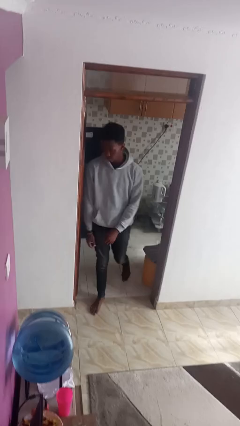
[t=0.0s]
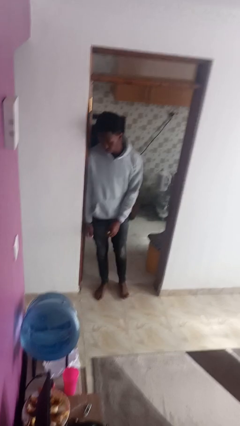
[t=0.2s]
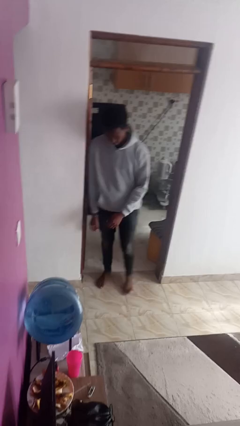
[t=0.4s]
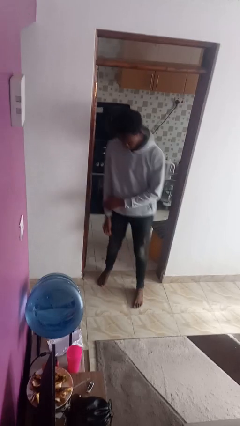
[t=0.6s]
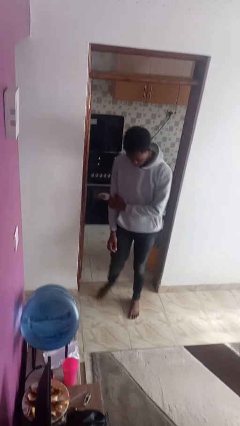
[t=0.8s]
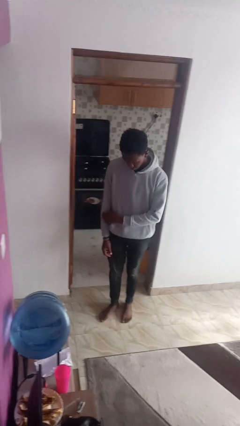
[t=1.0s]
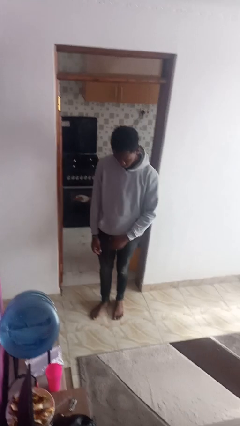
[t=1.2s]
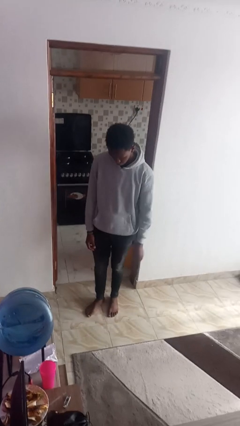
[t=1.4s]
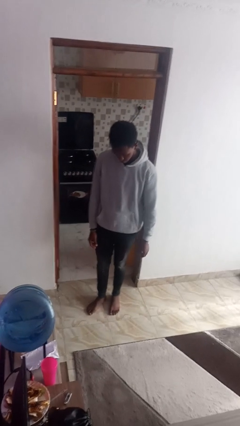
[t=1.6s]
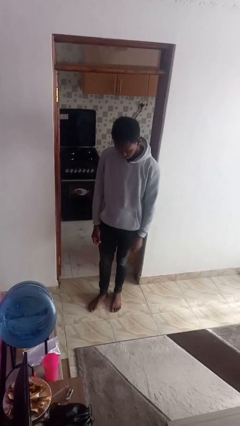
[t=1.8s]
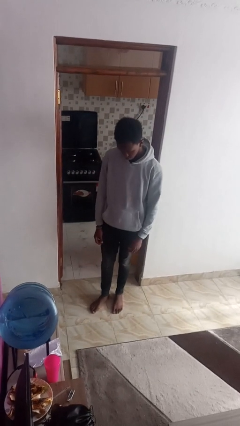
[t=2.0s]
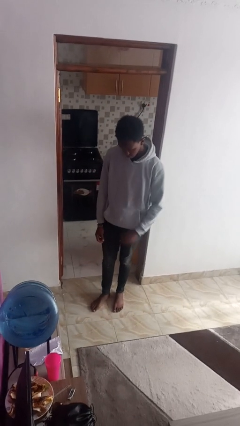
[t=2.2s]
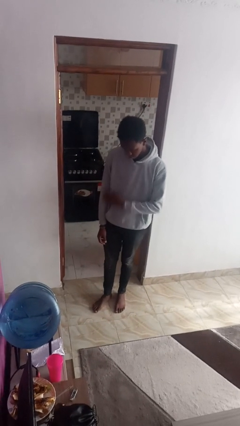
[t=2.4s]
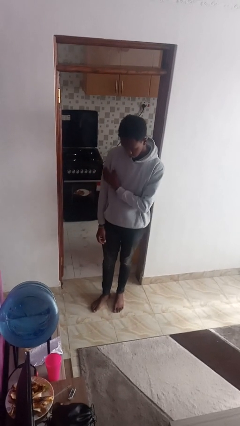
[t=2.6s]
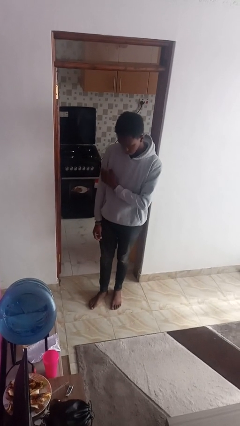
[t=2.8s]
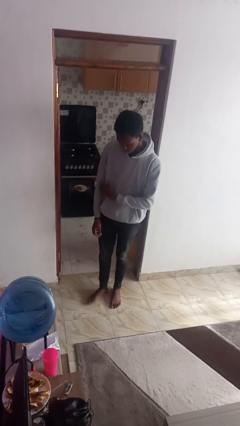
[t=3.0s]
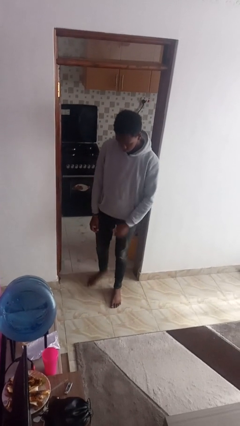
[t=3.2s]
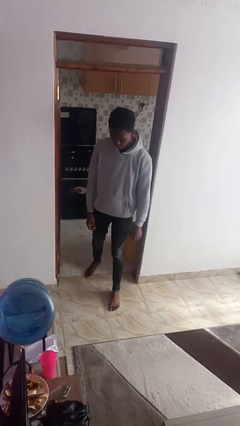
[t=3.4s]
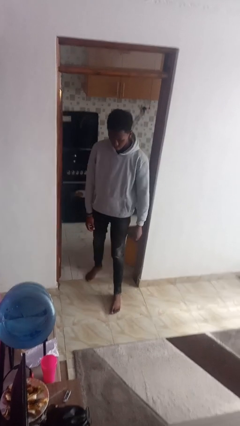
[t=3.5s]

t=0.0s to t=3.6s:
person bumps into wall

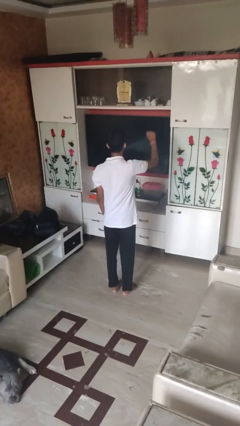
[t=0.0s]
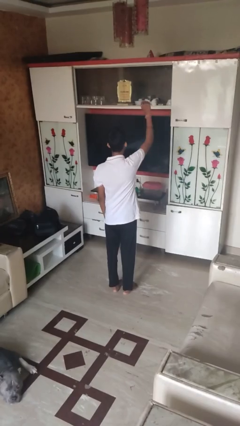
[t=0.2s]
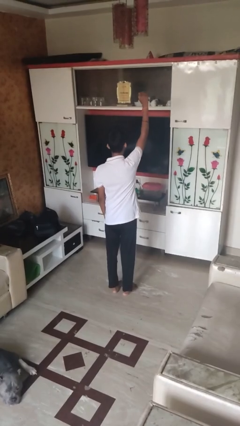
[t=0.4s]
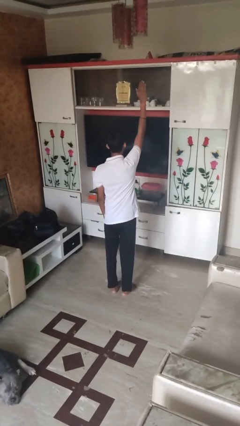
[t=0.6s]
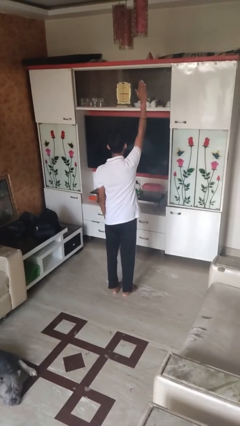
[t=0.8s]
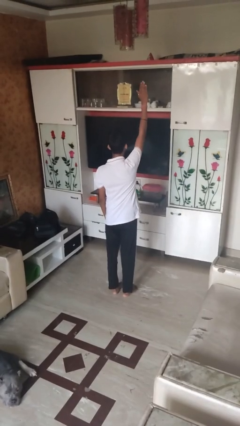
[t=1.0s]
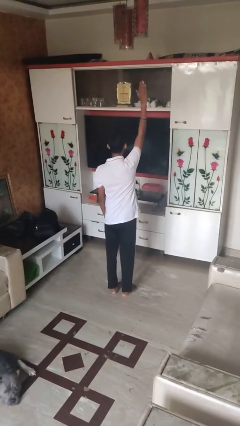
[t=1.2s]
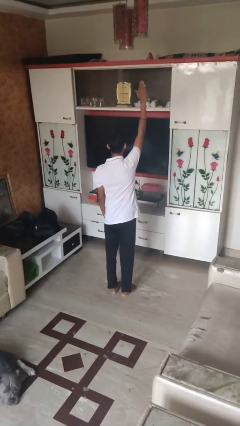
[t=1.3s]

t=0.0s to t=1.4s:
person gestures raise hand

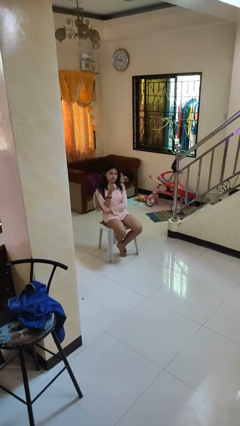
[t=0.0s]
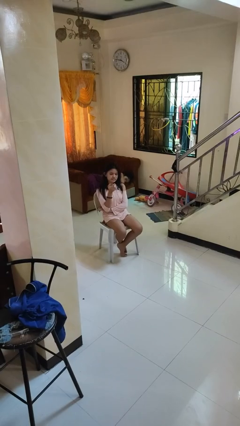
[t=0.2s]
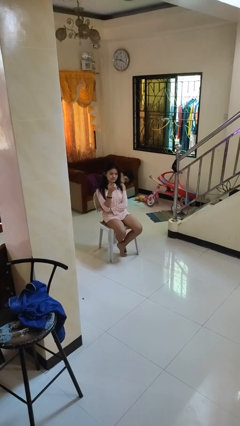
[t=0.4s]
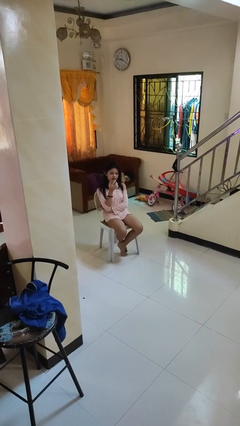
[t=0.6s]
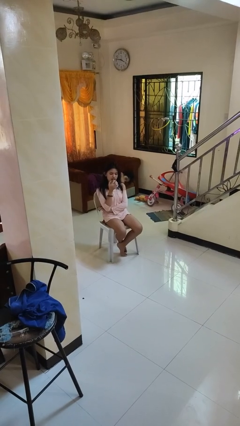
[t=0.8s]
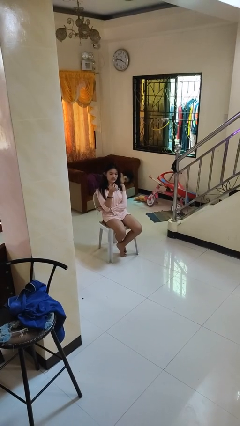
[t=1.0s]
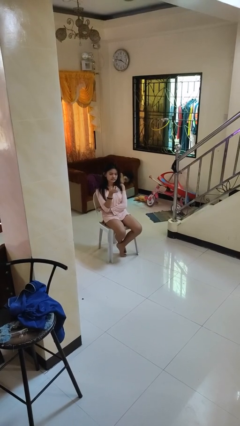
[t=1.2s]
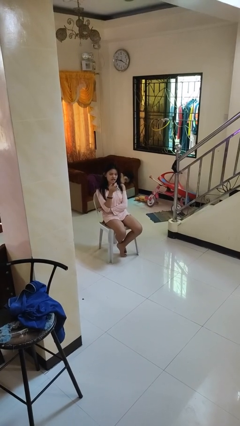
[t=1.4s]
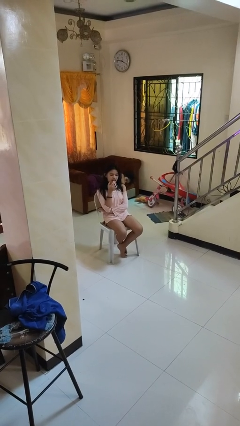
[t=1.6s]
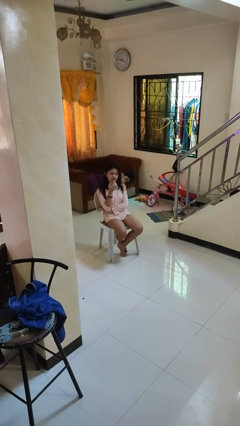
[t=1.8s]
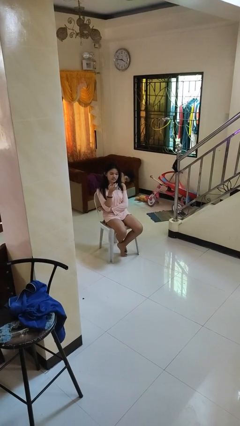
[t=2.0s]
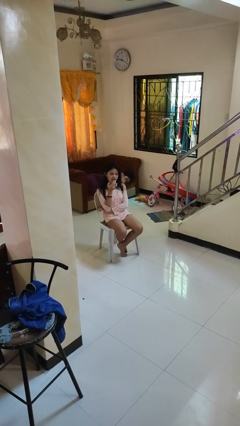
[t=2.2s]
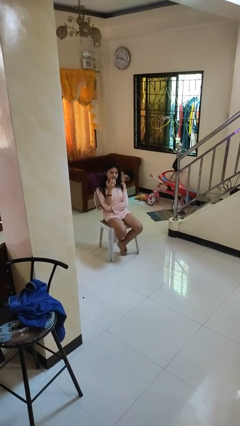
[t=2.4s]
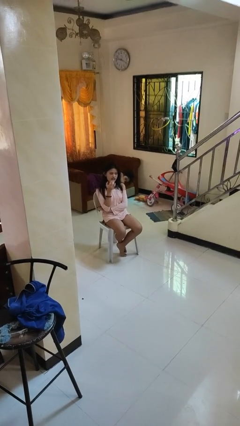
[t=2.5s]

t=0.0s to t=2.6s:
person licks fingers

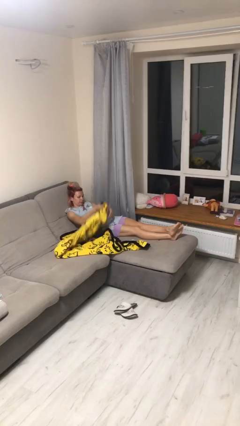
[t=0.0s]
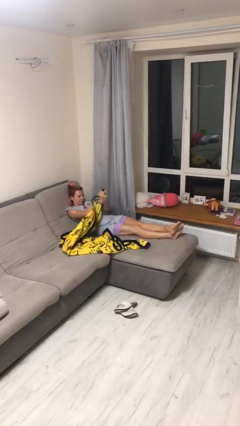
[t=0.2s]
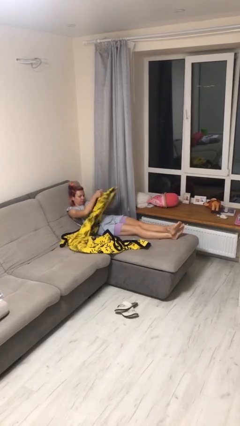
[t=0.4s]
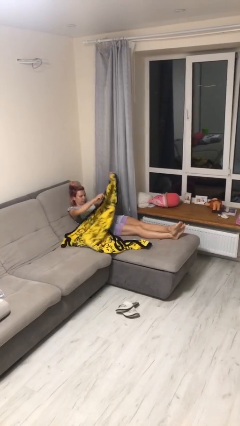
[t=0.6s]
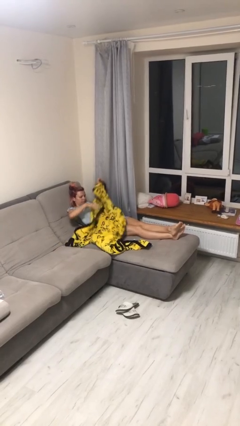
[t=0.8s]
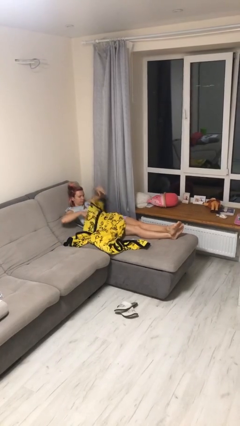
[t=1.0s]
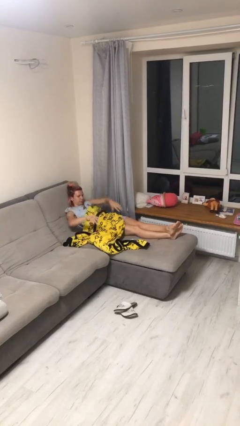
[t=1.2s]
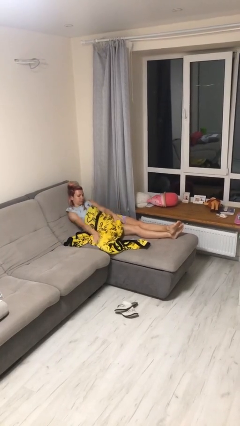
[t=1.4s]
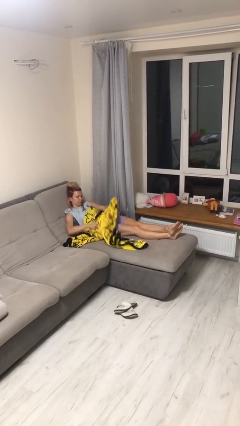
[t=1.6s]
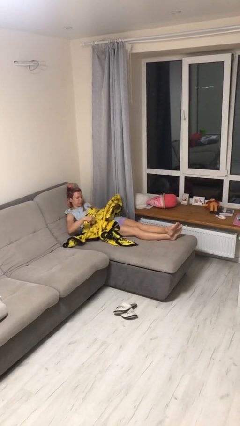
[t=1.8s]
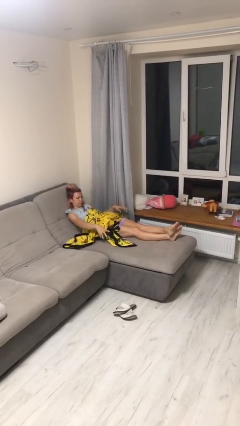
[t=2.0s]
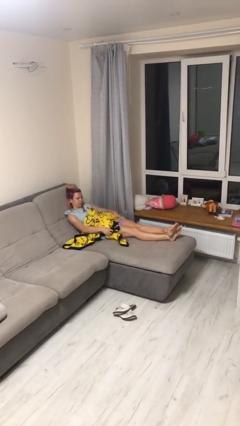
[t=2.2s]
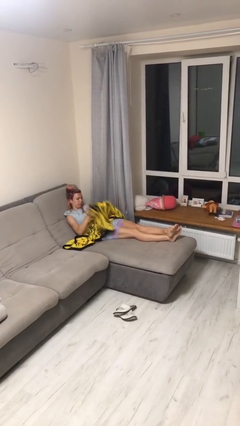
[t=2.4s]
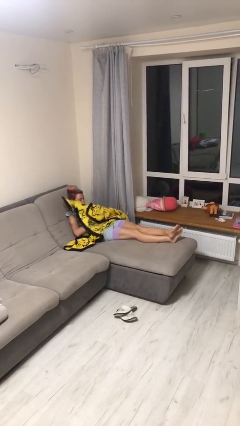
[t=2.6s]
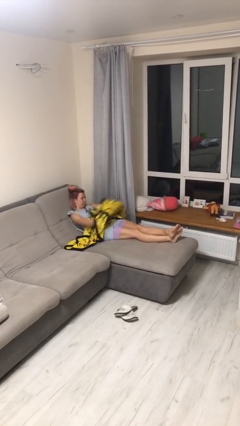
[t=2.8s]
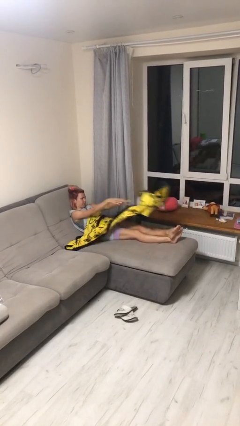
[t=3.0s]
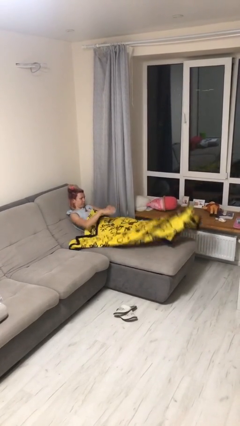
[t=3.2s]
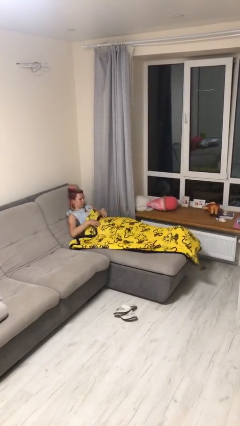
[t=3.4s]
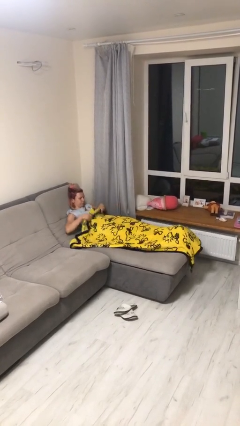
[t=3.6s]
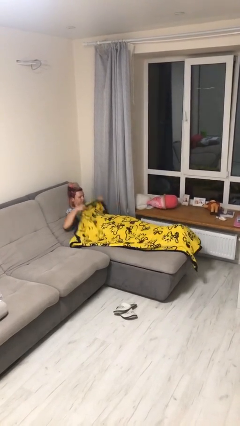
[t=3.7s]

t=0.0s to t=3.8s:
person covers with blanket

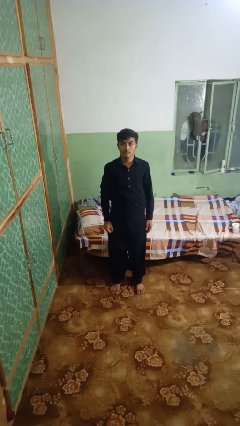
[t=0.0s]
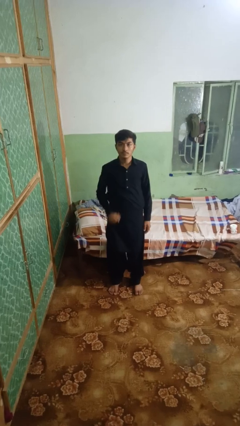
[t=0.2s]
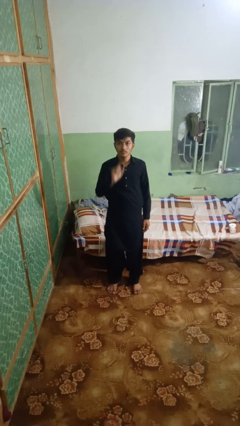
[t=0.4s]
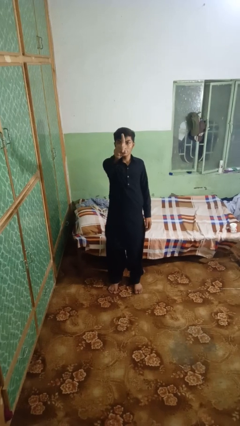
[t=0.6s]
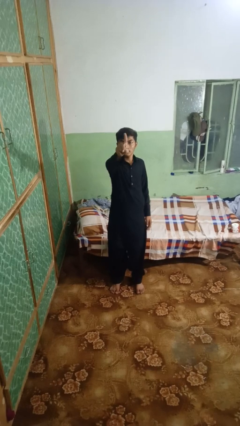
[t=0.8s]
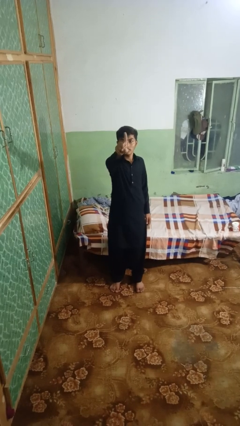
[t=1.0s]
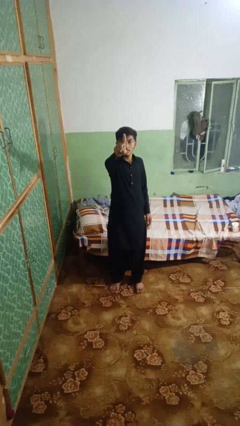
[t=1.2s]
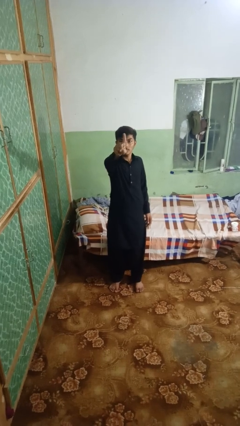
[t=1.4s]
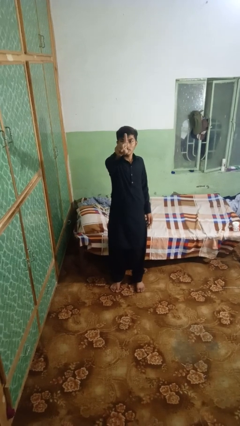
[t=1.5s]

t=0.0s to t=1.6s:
person gestures number one

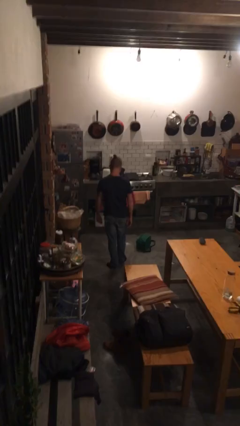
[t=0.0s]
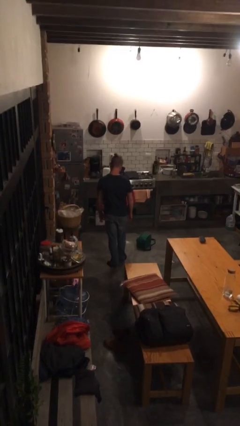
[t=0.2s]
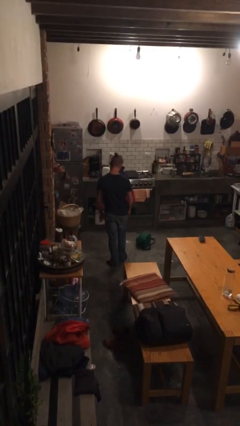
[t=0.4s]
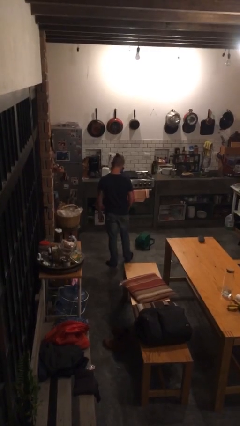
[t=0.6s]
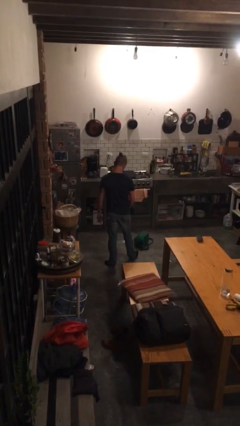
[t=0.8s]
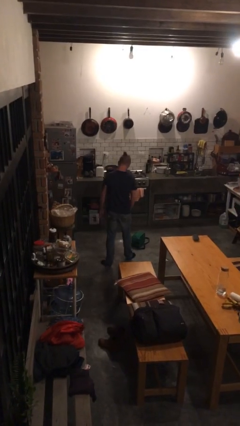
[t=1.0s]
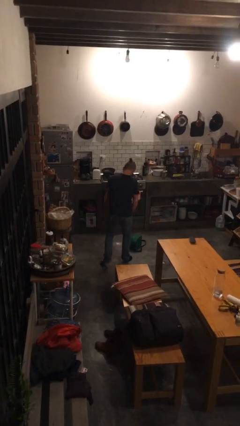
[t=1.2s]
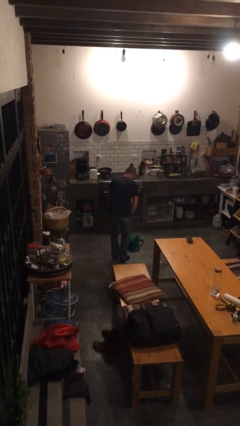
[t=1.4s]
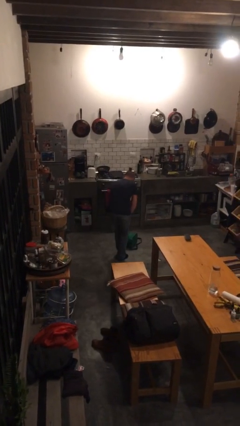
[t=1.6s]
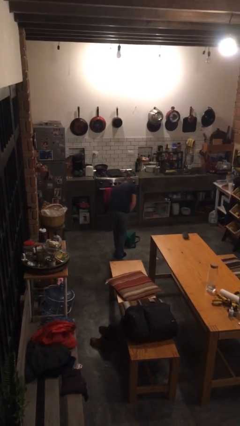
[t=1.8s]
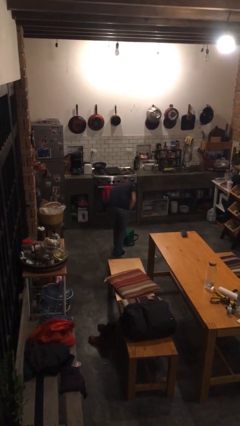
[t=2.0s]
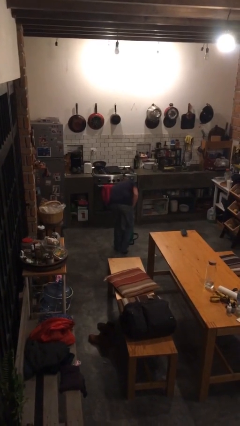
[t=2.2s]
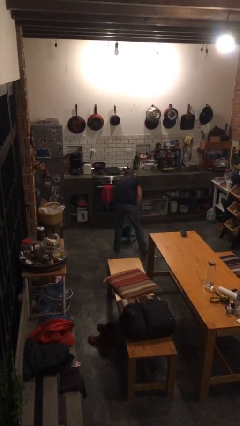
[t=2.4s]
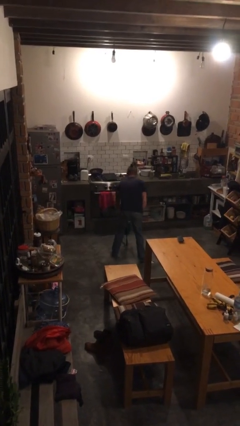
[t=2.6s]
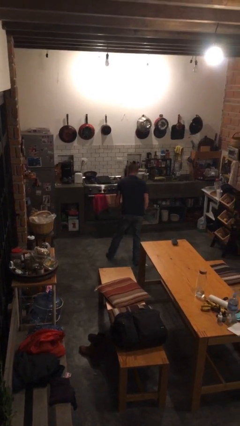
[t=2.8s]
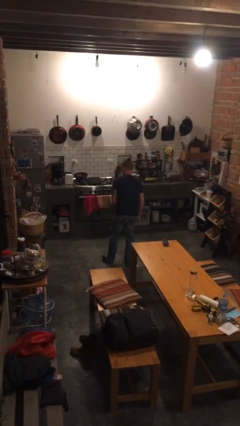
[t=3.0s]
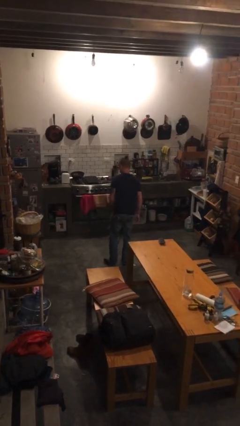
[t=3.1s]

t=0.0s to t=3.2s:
person picks up object from floor

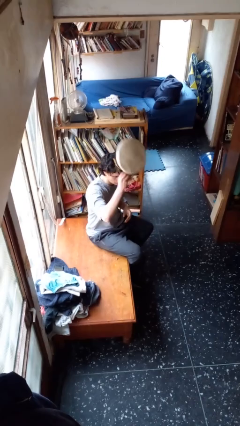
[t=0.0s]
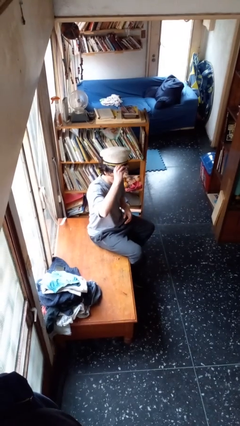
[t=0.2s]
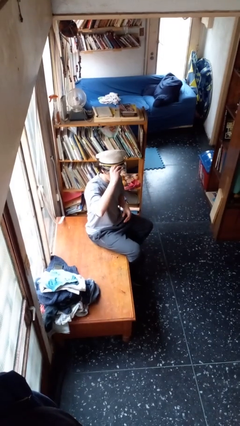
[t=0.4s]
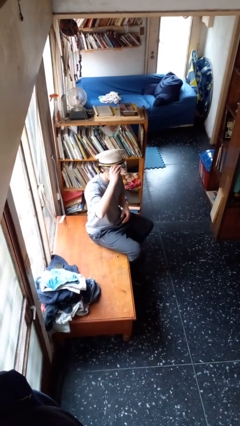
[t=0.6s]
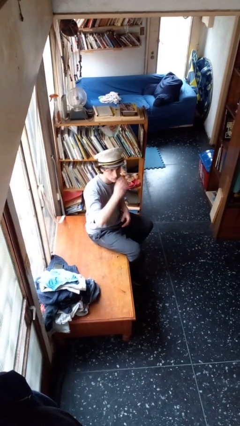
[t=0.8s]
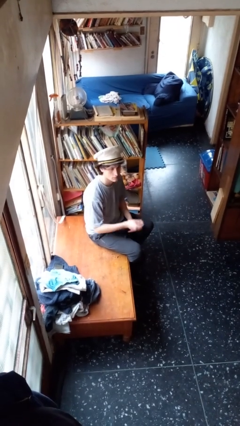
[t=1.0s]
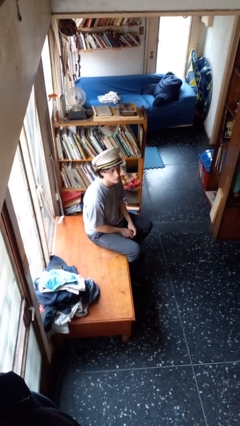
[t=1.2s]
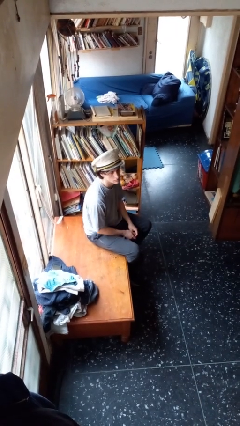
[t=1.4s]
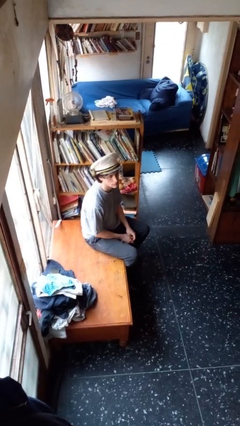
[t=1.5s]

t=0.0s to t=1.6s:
person puts on hat
